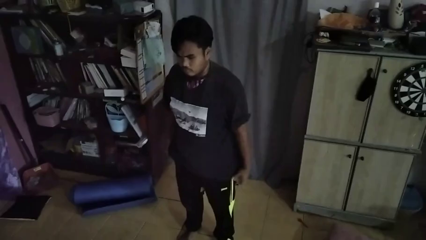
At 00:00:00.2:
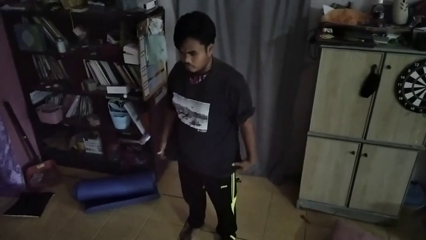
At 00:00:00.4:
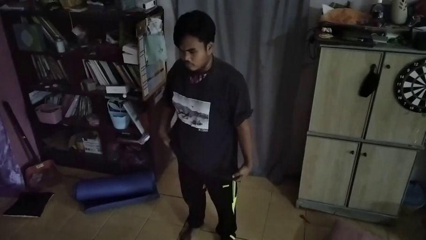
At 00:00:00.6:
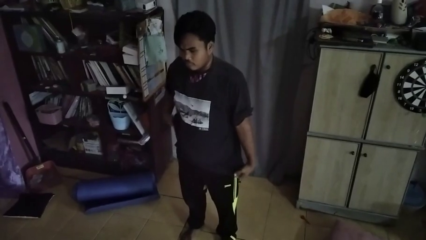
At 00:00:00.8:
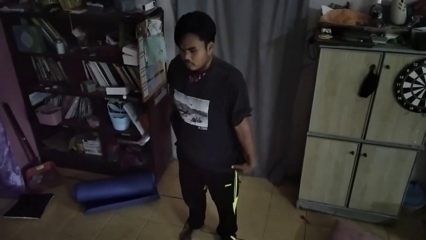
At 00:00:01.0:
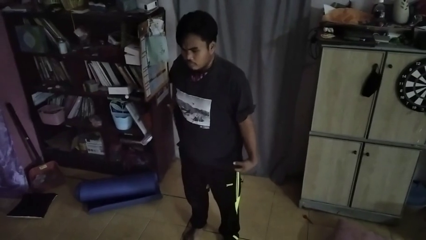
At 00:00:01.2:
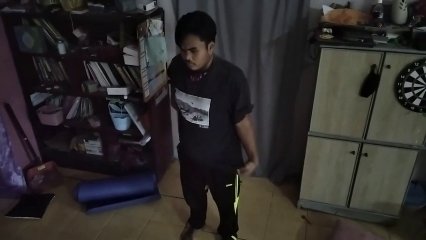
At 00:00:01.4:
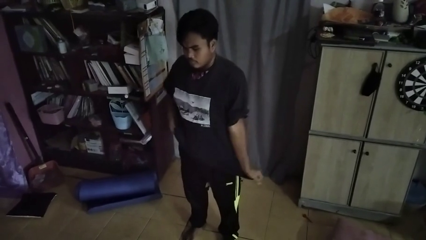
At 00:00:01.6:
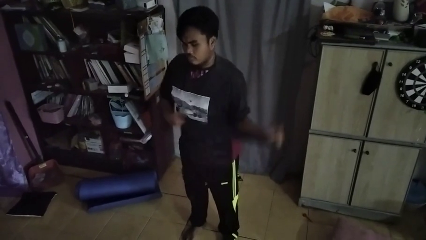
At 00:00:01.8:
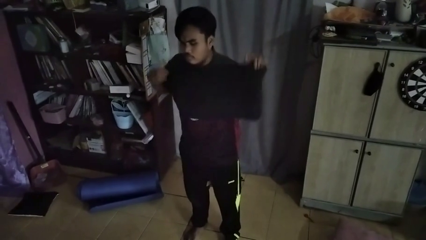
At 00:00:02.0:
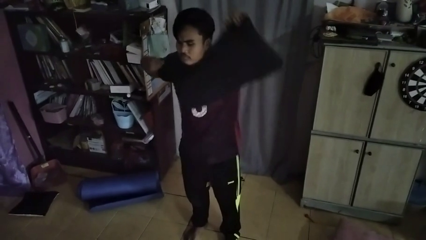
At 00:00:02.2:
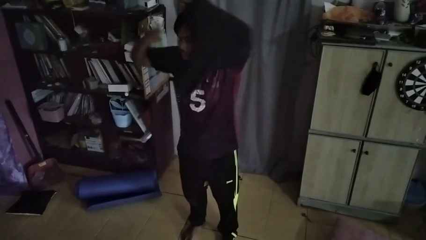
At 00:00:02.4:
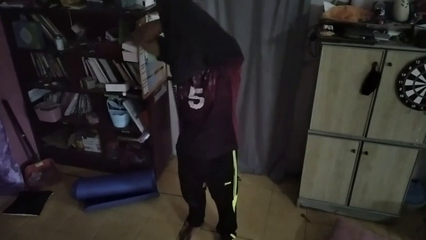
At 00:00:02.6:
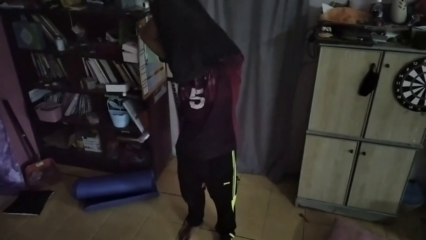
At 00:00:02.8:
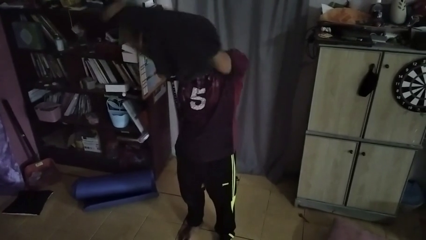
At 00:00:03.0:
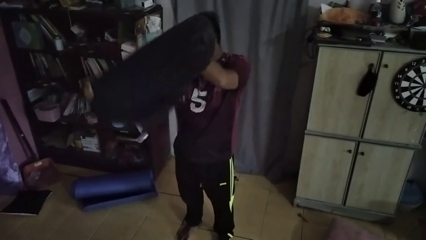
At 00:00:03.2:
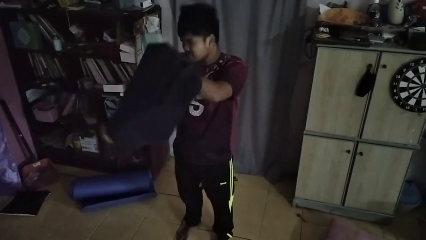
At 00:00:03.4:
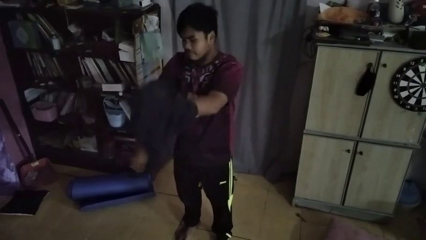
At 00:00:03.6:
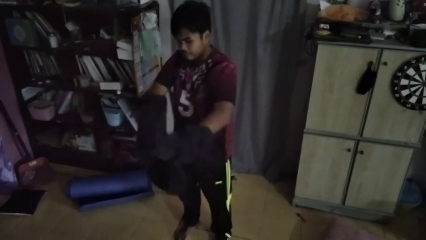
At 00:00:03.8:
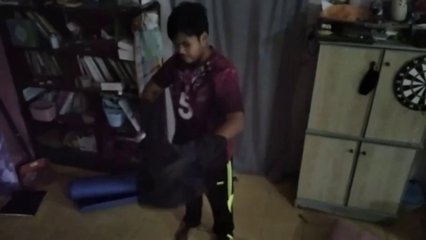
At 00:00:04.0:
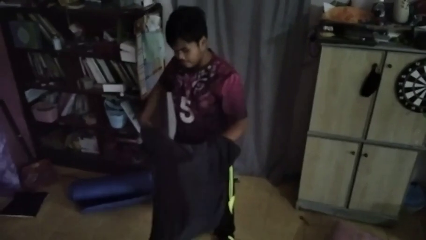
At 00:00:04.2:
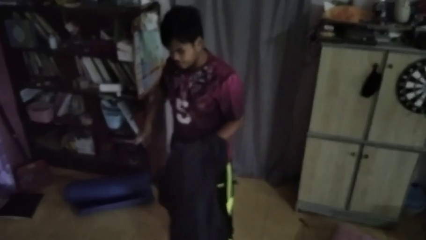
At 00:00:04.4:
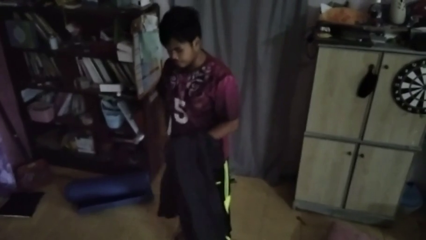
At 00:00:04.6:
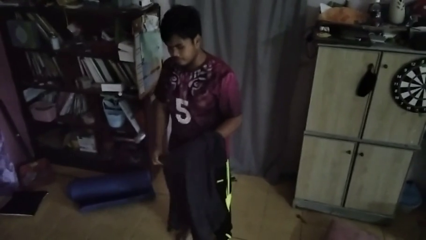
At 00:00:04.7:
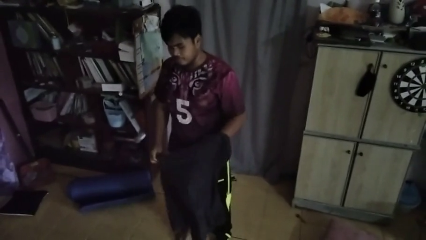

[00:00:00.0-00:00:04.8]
person takes off shirt

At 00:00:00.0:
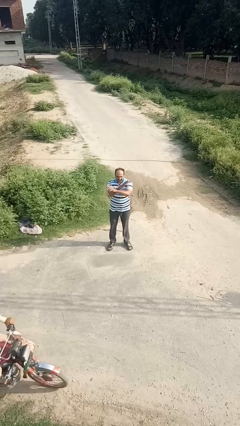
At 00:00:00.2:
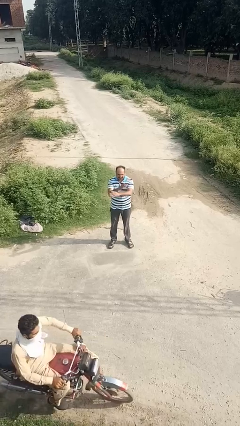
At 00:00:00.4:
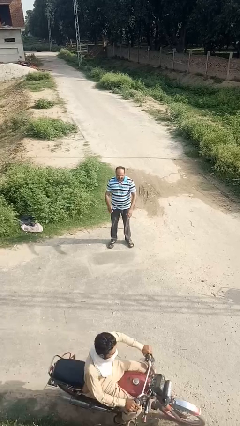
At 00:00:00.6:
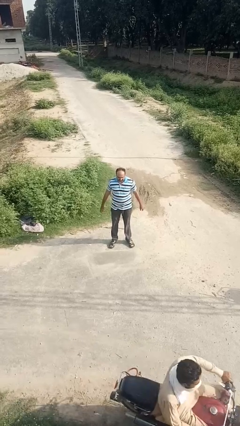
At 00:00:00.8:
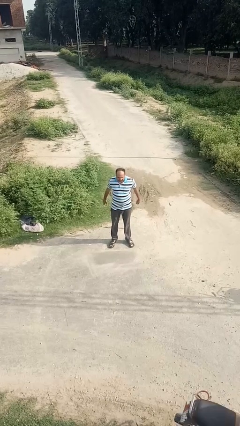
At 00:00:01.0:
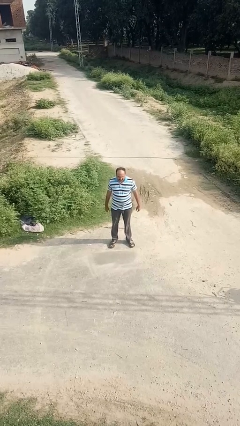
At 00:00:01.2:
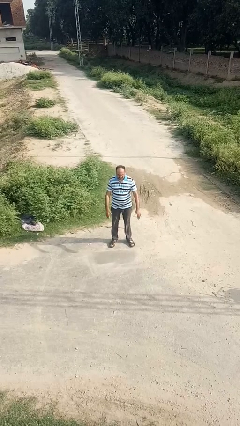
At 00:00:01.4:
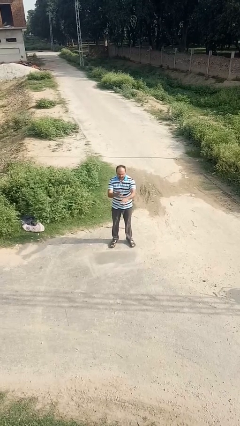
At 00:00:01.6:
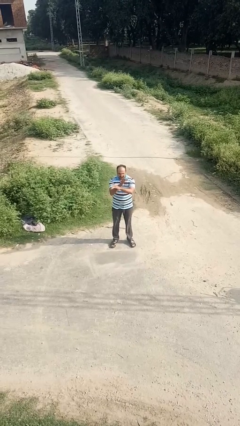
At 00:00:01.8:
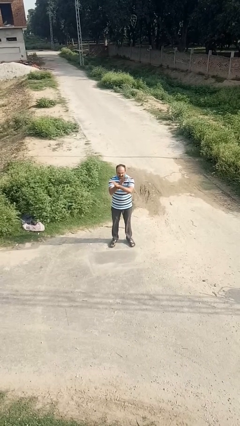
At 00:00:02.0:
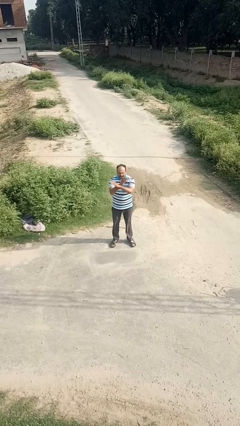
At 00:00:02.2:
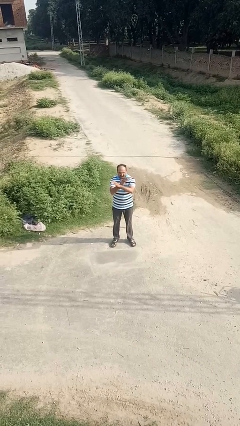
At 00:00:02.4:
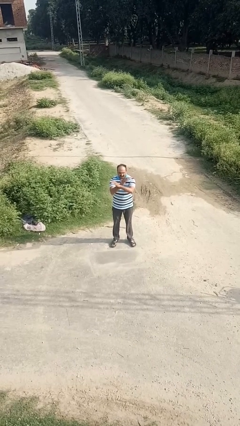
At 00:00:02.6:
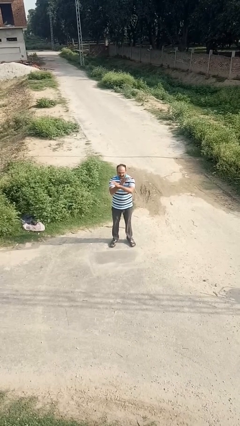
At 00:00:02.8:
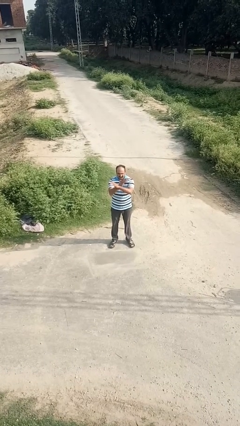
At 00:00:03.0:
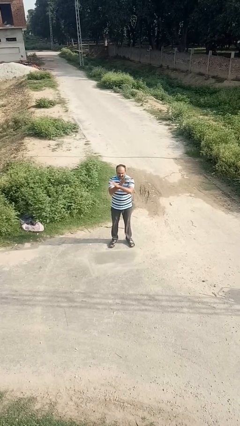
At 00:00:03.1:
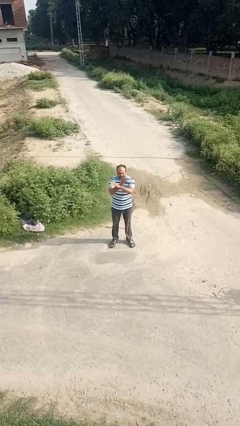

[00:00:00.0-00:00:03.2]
person crosses arms

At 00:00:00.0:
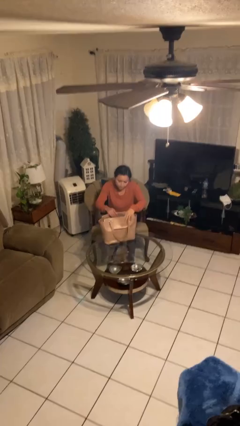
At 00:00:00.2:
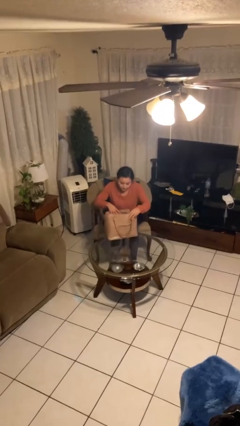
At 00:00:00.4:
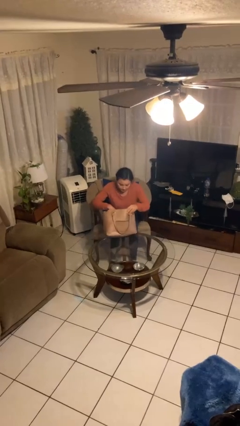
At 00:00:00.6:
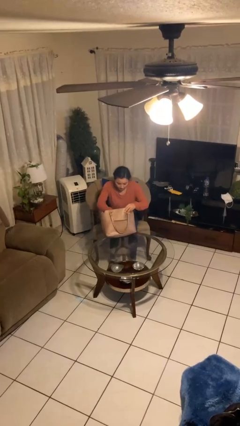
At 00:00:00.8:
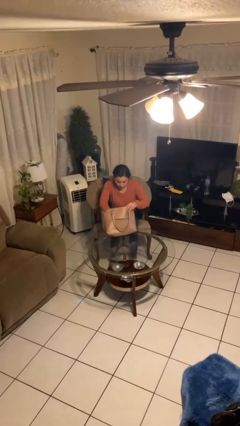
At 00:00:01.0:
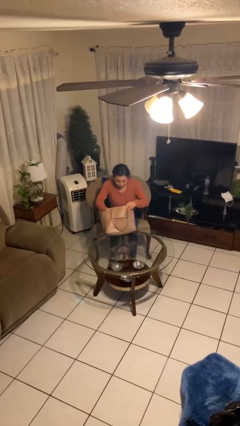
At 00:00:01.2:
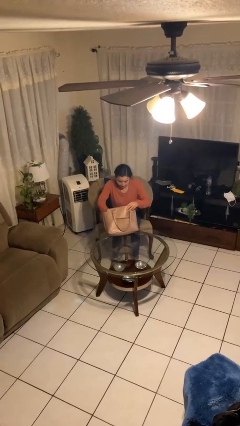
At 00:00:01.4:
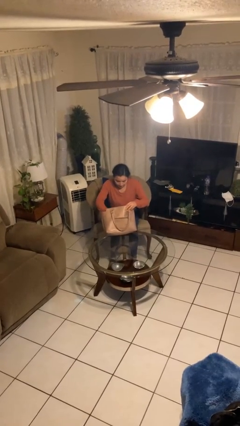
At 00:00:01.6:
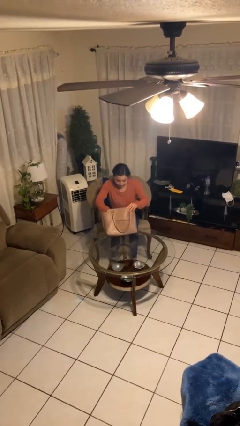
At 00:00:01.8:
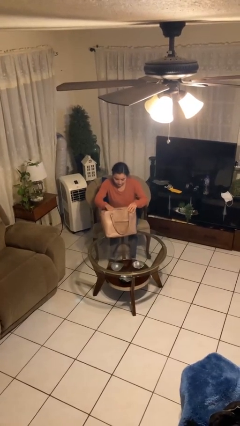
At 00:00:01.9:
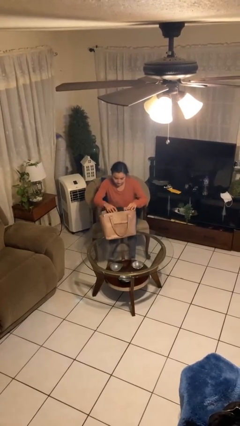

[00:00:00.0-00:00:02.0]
person searches in purse

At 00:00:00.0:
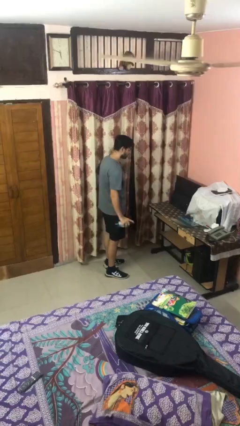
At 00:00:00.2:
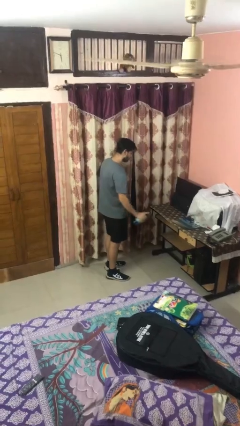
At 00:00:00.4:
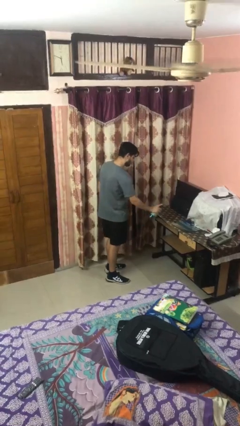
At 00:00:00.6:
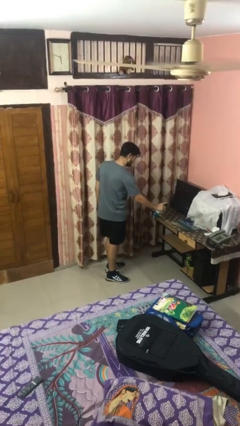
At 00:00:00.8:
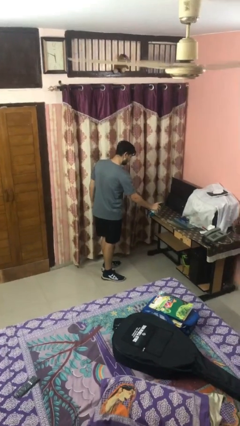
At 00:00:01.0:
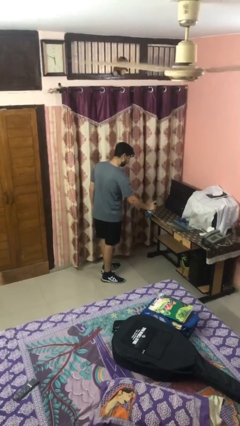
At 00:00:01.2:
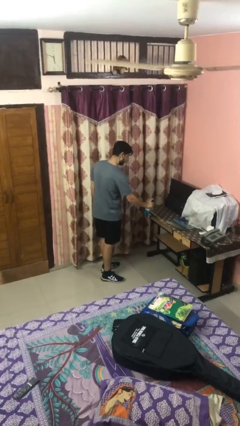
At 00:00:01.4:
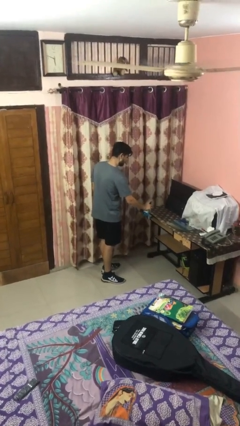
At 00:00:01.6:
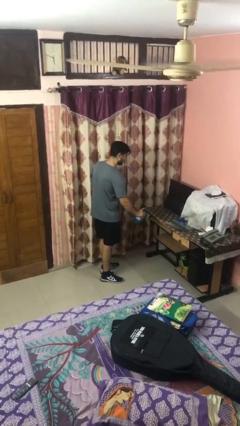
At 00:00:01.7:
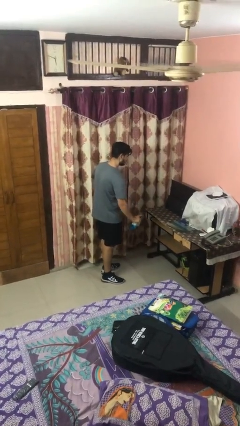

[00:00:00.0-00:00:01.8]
person sprays from bottle

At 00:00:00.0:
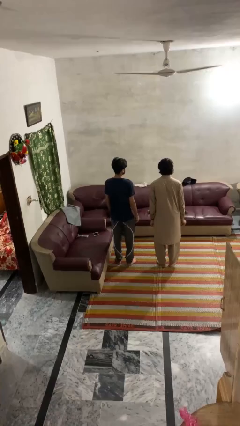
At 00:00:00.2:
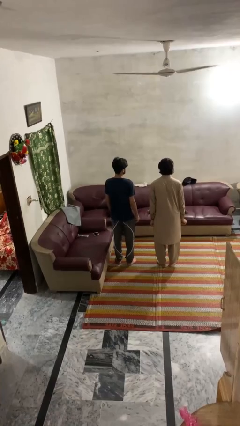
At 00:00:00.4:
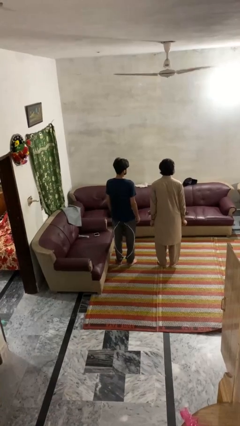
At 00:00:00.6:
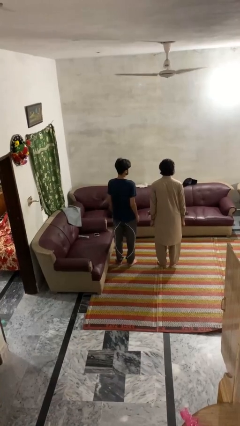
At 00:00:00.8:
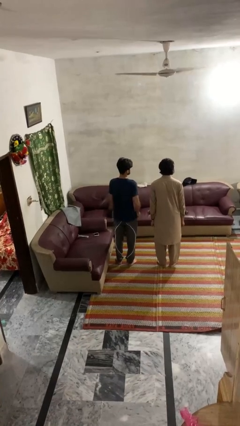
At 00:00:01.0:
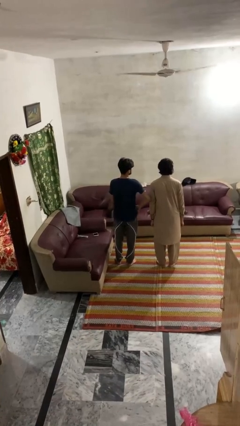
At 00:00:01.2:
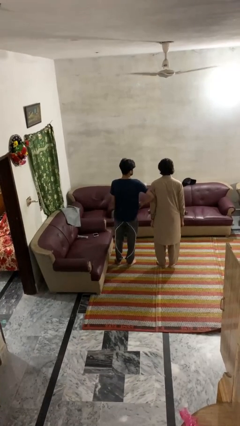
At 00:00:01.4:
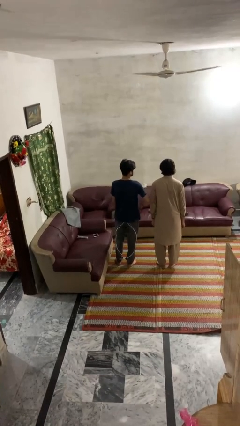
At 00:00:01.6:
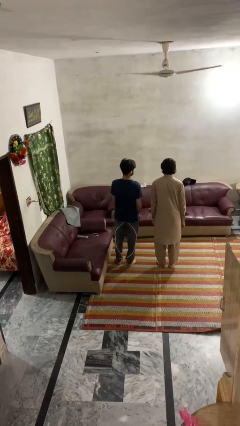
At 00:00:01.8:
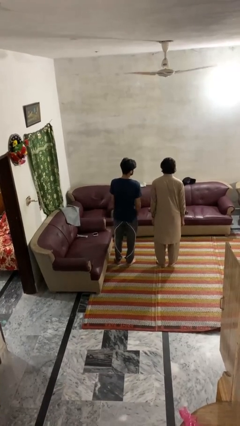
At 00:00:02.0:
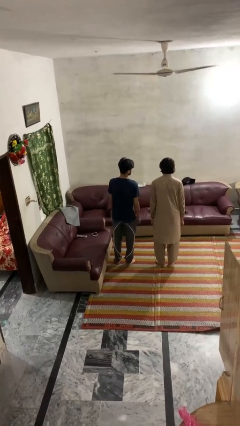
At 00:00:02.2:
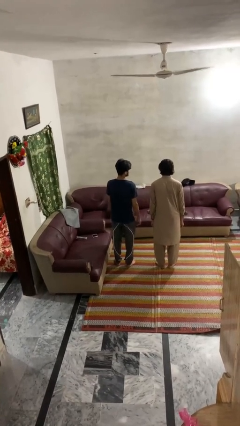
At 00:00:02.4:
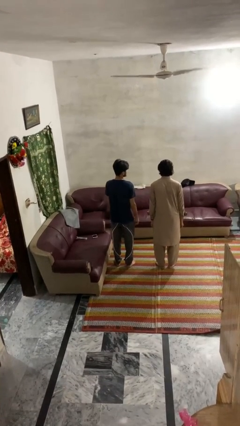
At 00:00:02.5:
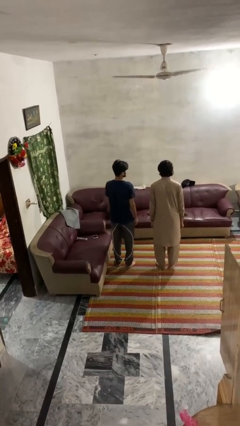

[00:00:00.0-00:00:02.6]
person nudges person with elbow

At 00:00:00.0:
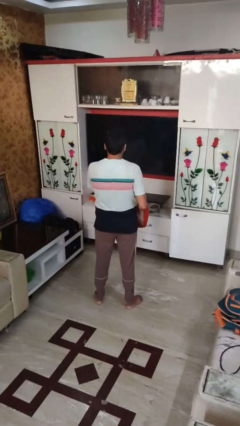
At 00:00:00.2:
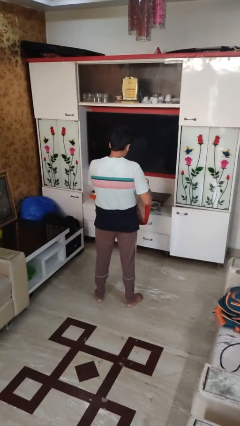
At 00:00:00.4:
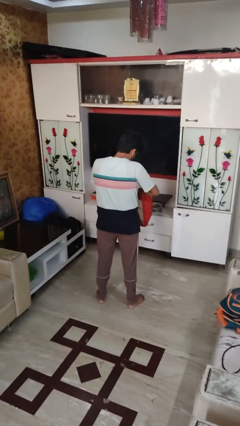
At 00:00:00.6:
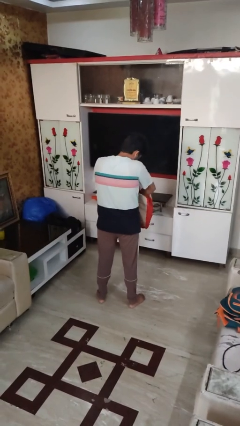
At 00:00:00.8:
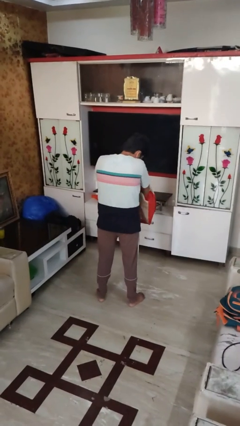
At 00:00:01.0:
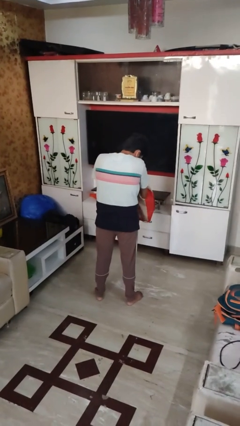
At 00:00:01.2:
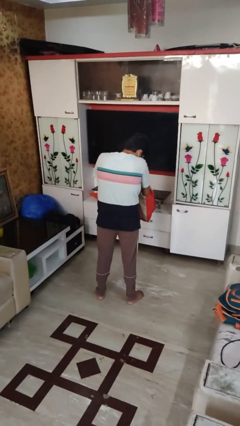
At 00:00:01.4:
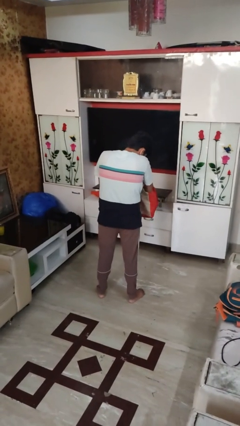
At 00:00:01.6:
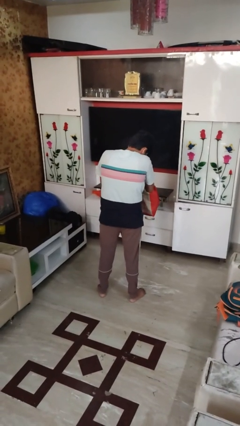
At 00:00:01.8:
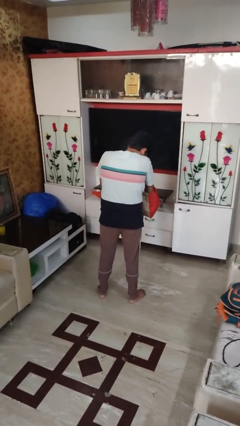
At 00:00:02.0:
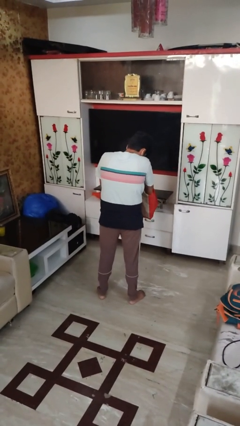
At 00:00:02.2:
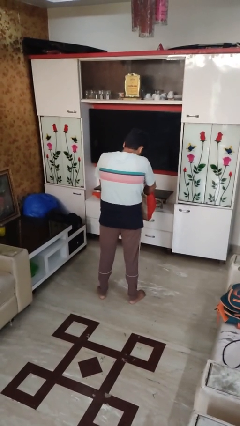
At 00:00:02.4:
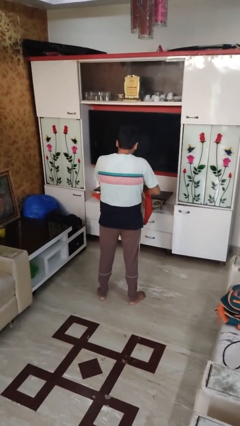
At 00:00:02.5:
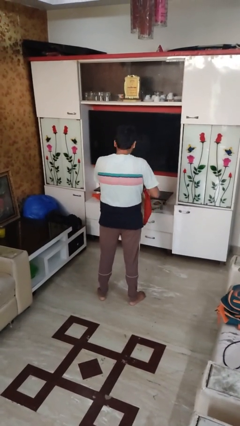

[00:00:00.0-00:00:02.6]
person searches in bag

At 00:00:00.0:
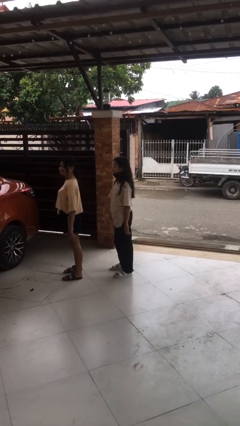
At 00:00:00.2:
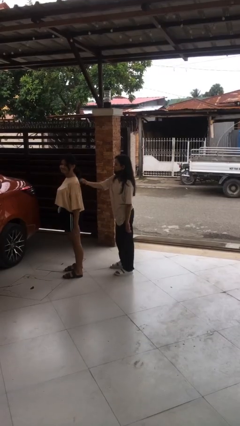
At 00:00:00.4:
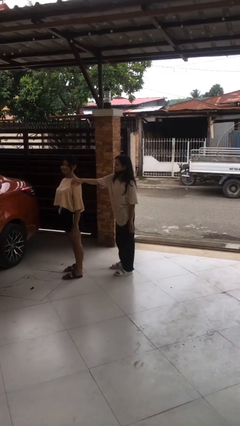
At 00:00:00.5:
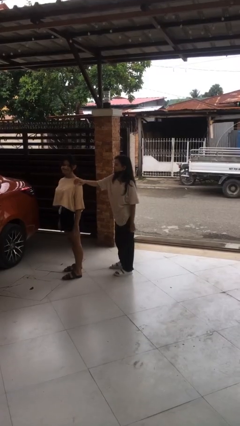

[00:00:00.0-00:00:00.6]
person grabs person by shoulder
